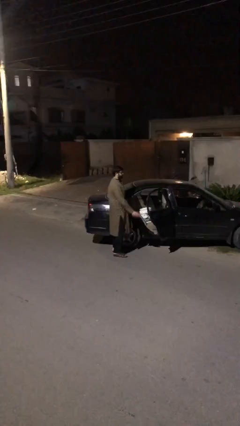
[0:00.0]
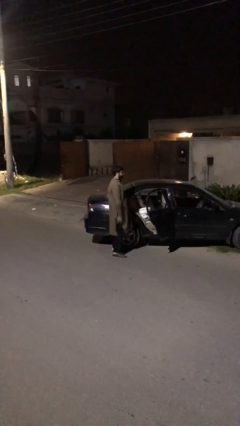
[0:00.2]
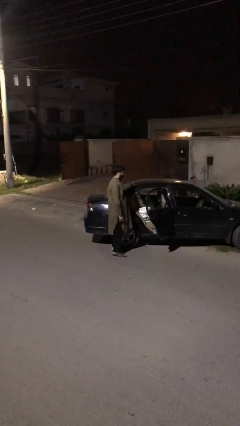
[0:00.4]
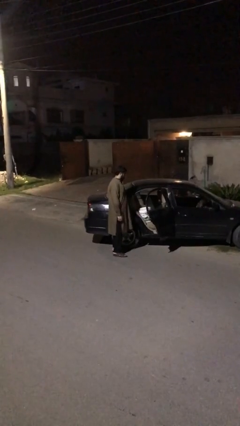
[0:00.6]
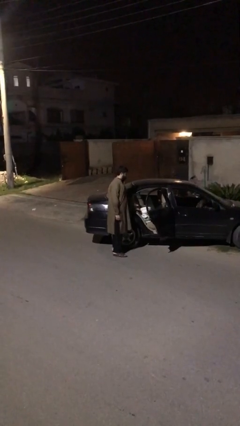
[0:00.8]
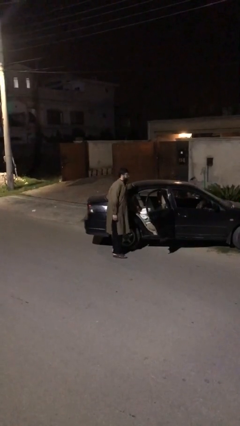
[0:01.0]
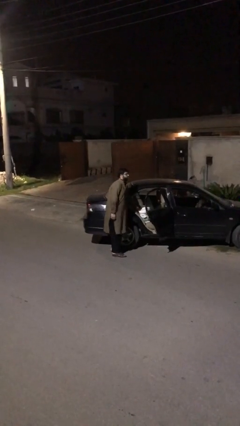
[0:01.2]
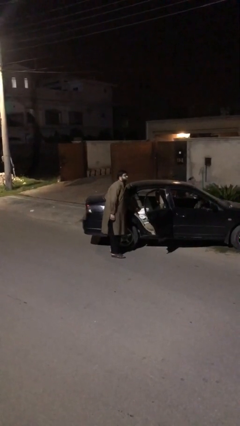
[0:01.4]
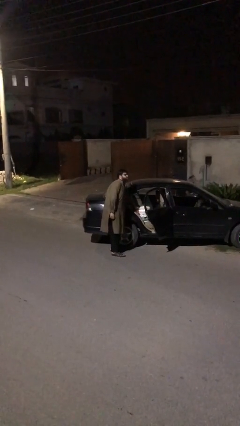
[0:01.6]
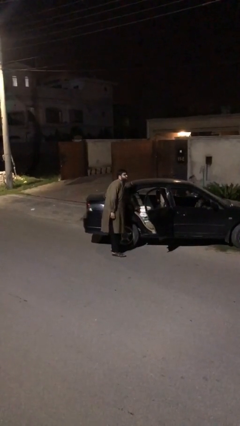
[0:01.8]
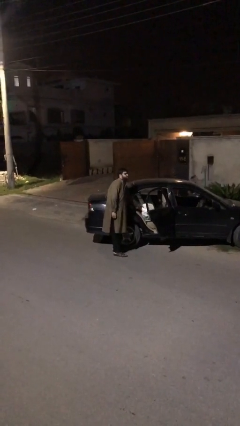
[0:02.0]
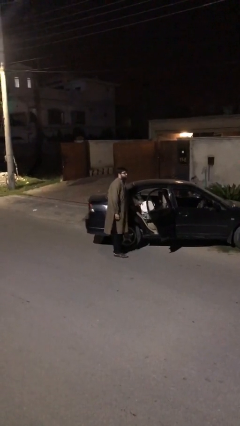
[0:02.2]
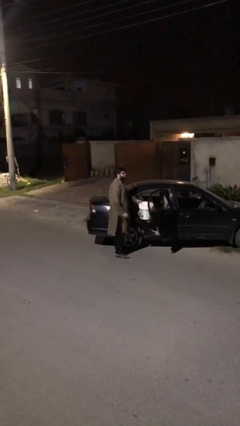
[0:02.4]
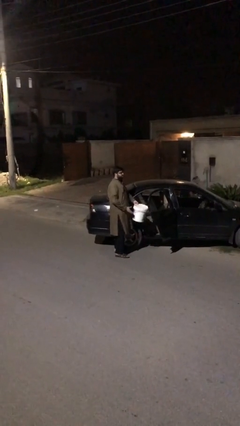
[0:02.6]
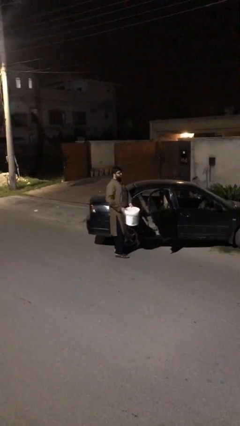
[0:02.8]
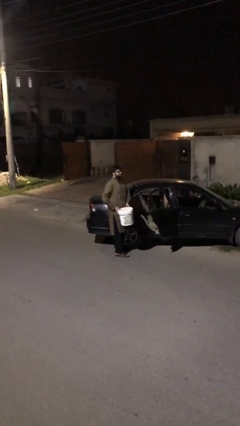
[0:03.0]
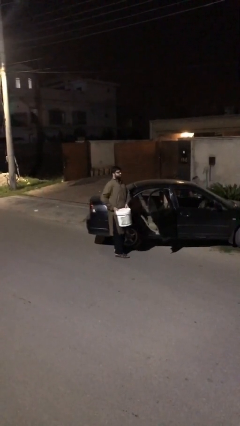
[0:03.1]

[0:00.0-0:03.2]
person unloads car

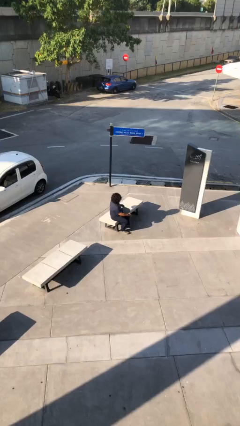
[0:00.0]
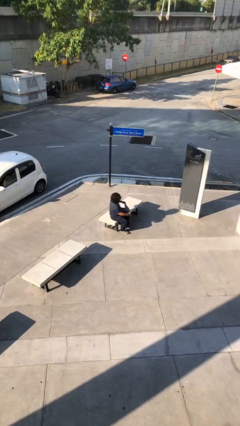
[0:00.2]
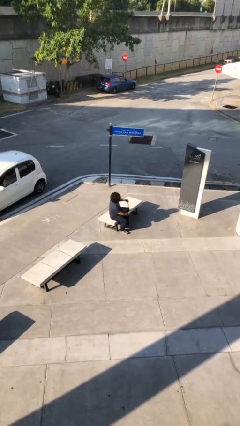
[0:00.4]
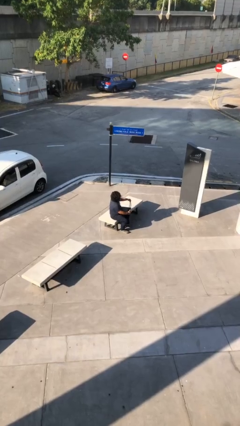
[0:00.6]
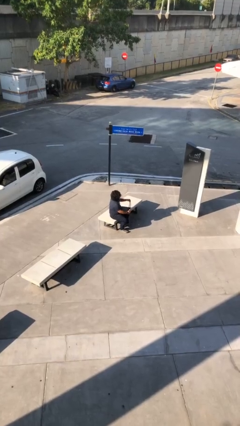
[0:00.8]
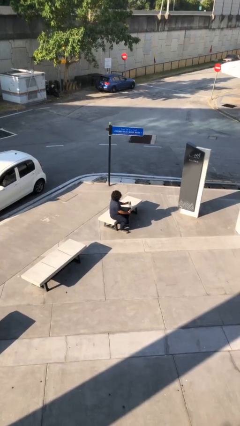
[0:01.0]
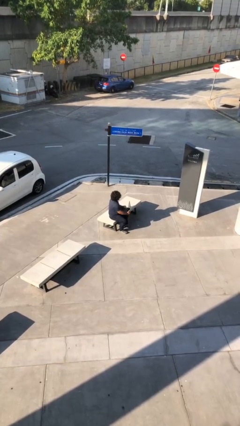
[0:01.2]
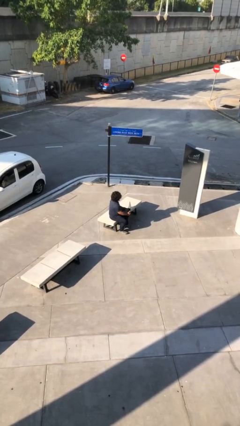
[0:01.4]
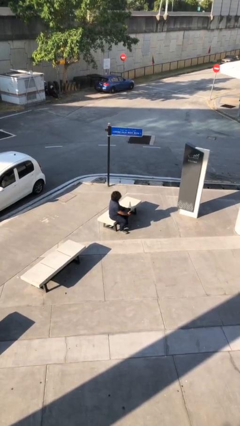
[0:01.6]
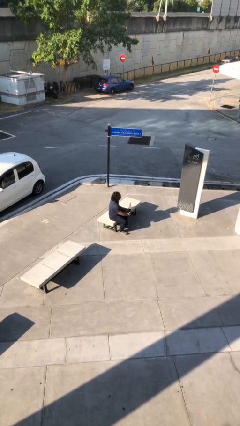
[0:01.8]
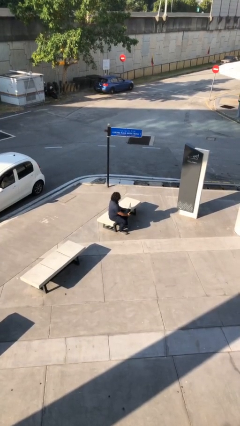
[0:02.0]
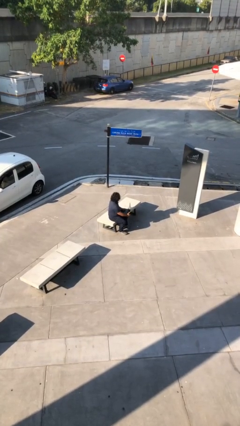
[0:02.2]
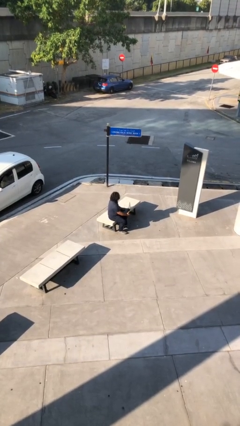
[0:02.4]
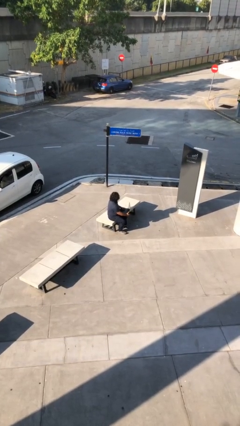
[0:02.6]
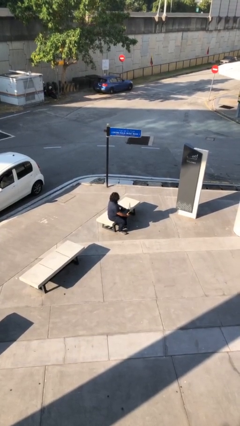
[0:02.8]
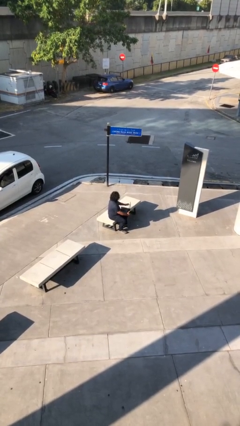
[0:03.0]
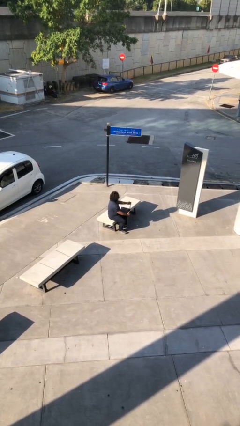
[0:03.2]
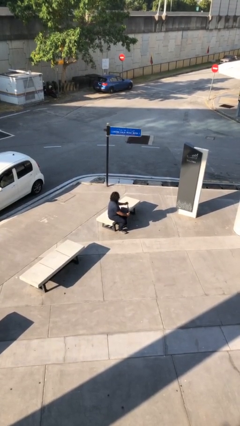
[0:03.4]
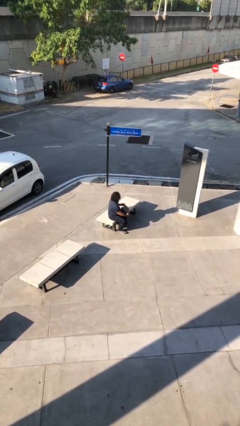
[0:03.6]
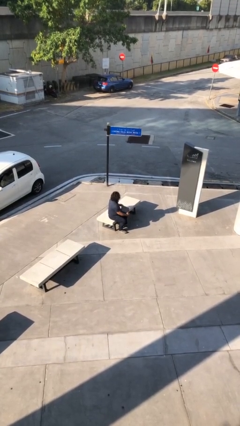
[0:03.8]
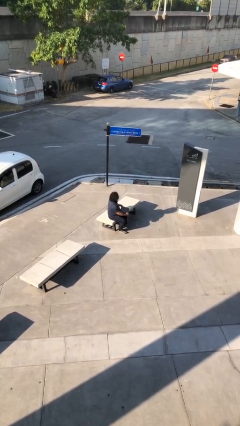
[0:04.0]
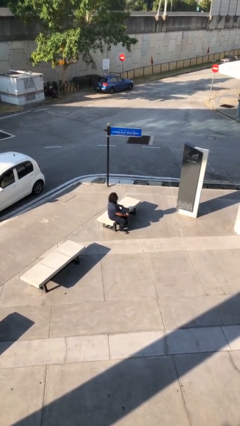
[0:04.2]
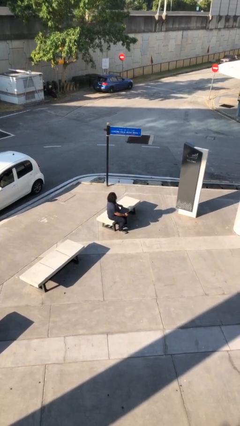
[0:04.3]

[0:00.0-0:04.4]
person interacts with laptop

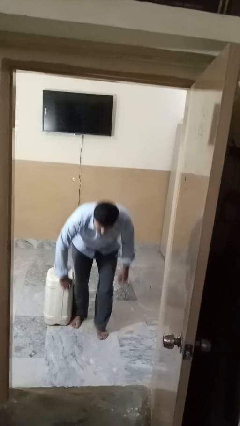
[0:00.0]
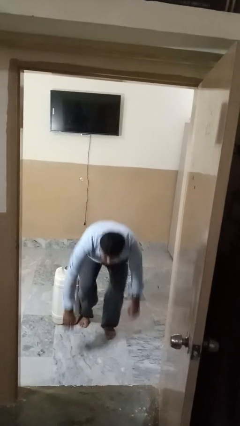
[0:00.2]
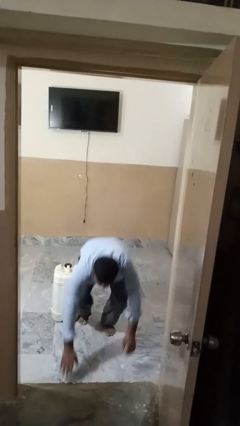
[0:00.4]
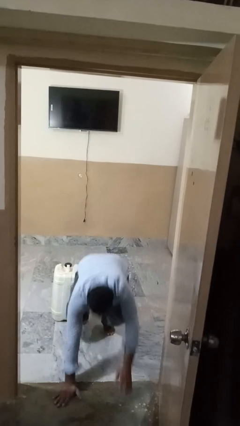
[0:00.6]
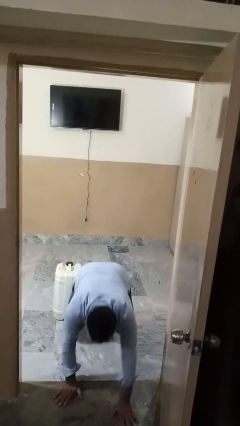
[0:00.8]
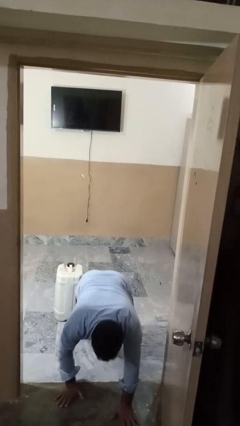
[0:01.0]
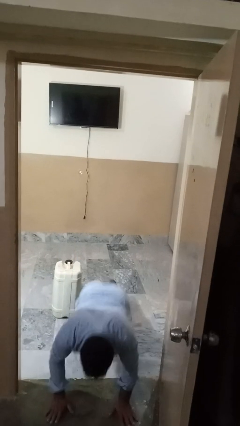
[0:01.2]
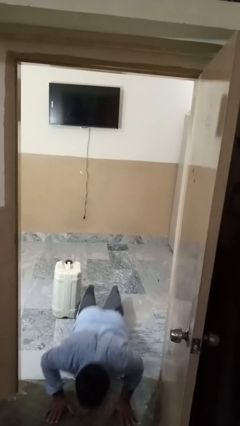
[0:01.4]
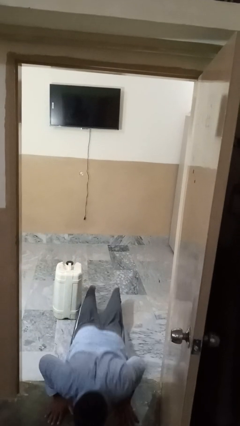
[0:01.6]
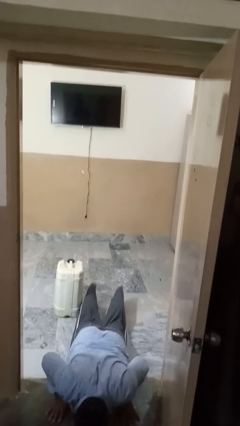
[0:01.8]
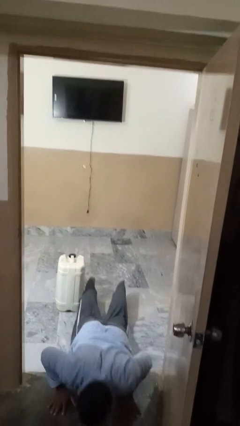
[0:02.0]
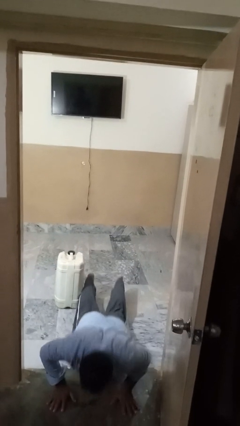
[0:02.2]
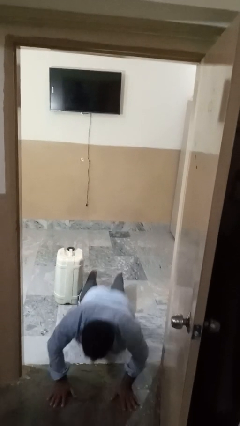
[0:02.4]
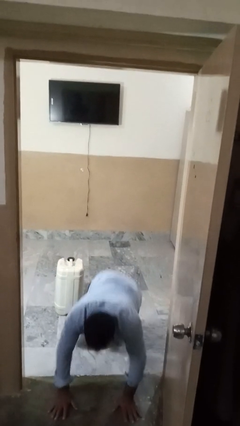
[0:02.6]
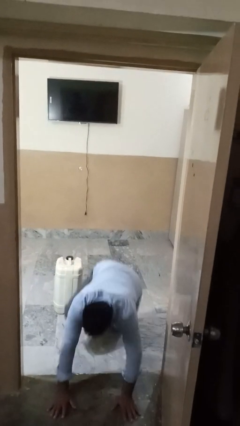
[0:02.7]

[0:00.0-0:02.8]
person lies down on floor

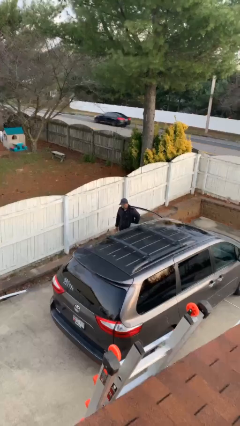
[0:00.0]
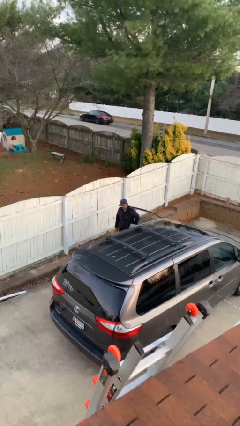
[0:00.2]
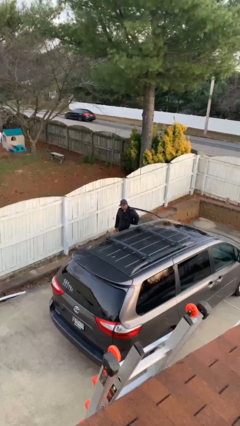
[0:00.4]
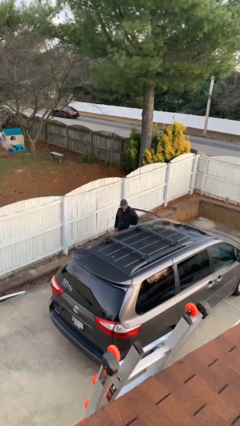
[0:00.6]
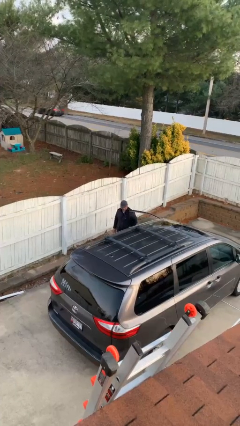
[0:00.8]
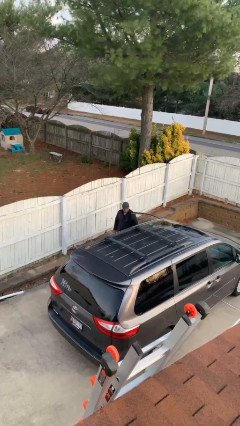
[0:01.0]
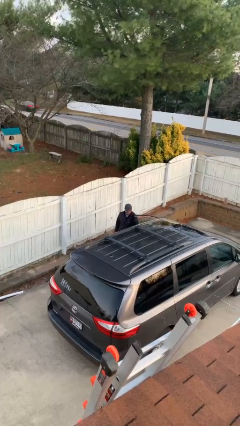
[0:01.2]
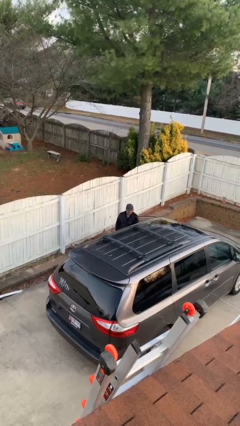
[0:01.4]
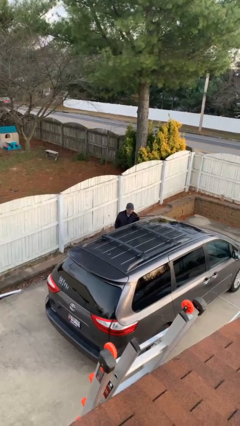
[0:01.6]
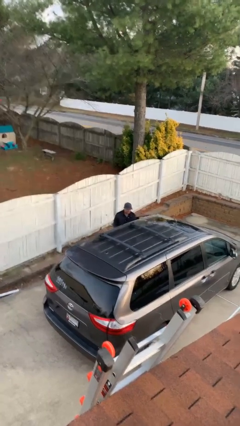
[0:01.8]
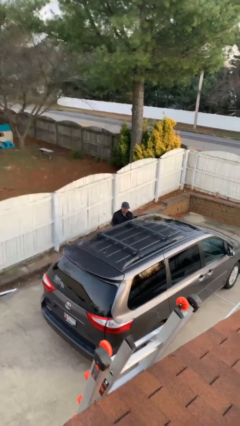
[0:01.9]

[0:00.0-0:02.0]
person closes car door

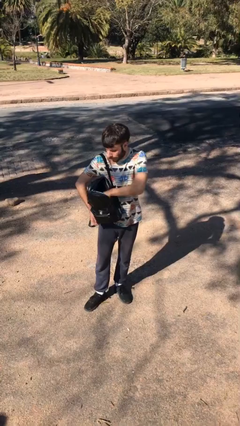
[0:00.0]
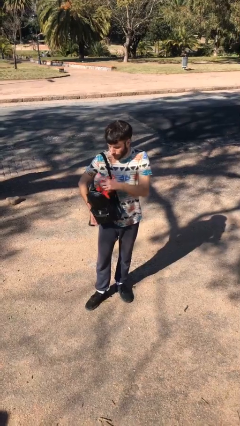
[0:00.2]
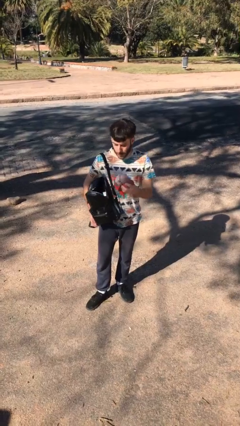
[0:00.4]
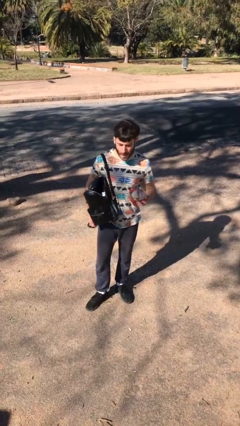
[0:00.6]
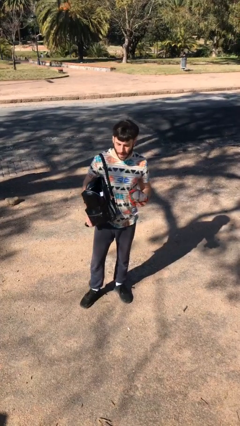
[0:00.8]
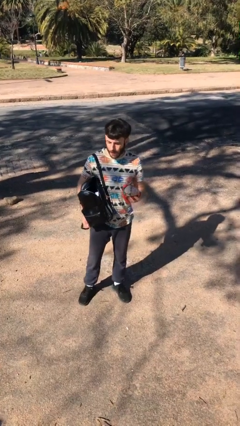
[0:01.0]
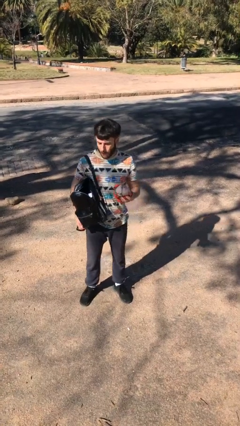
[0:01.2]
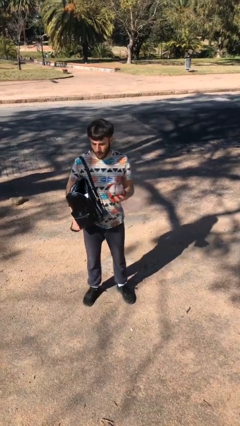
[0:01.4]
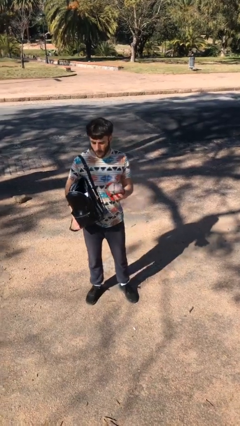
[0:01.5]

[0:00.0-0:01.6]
person takes object from backpack

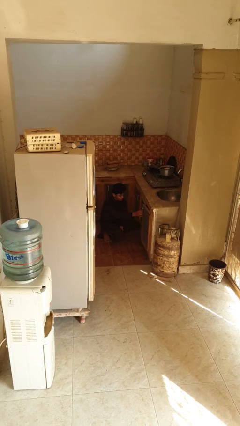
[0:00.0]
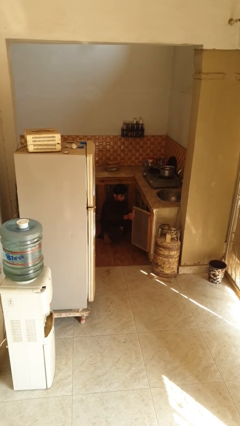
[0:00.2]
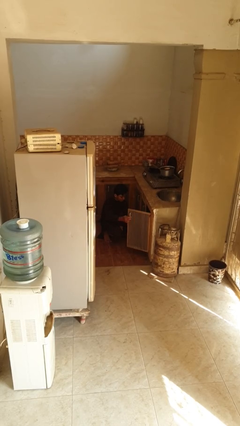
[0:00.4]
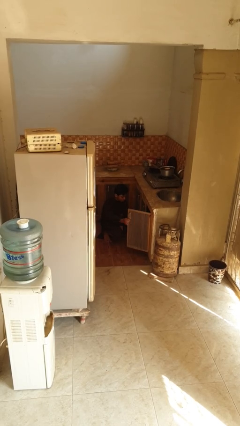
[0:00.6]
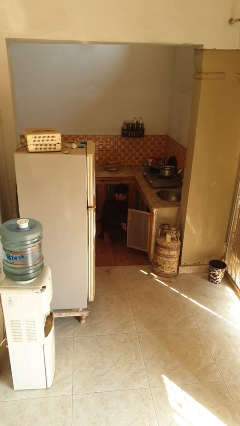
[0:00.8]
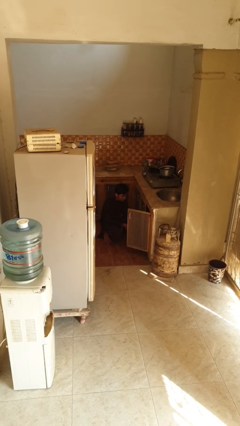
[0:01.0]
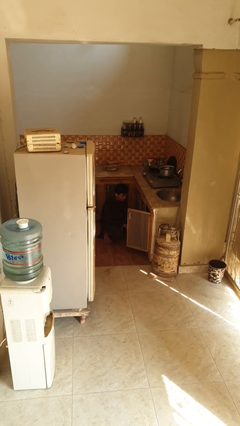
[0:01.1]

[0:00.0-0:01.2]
person opens kitchen drawer

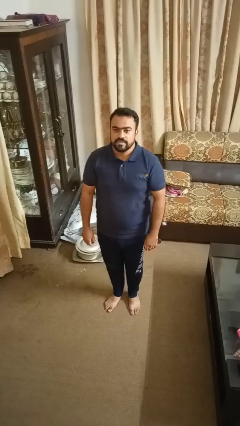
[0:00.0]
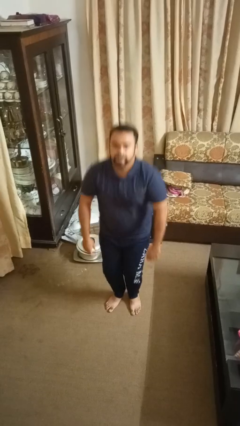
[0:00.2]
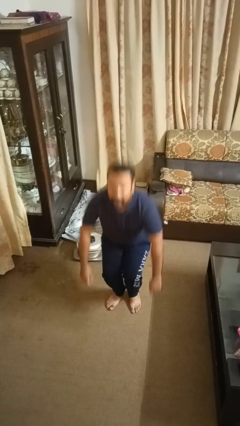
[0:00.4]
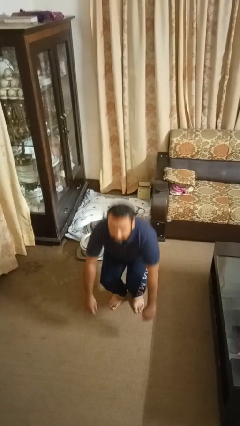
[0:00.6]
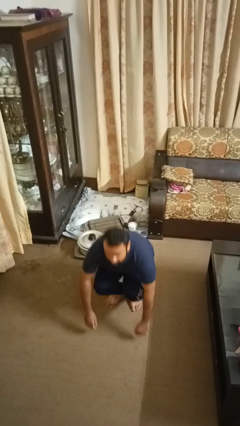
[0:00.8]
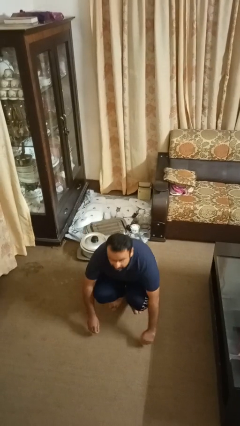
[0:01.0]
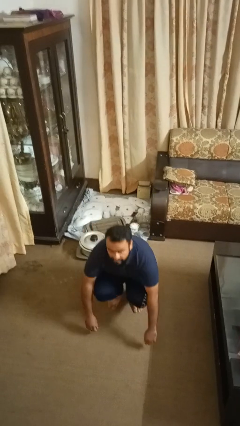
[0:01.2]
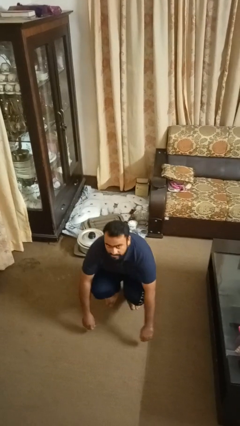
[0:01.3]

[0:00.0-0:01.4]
person squats

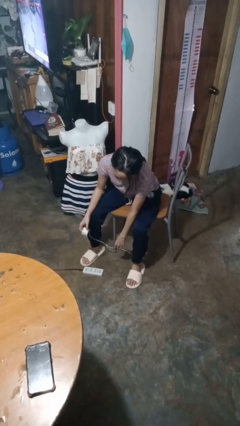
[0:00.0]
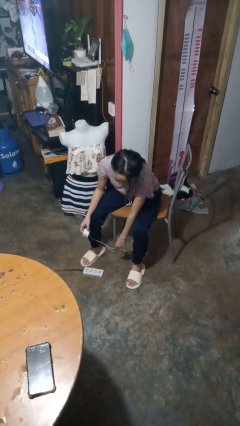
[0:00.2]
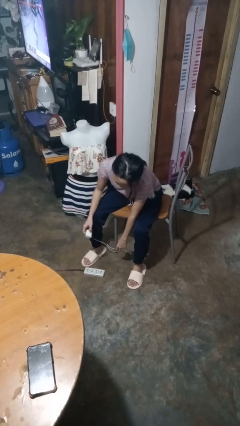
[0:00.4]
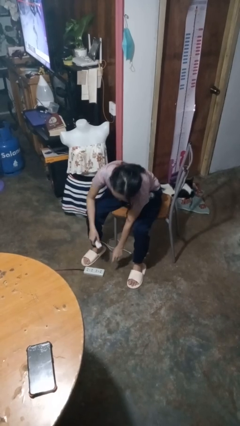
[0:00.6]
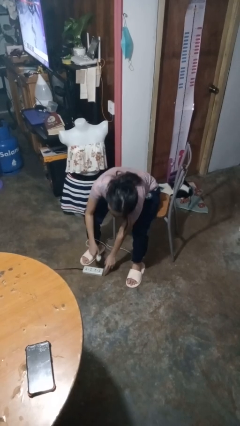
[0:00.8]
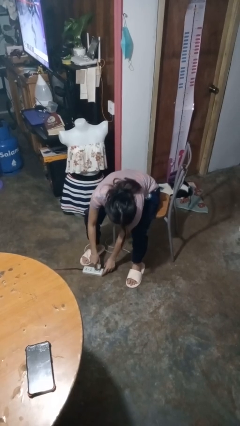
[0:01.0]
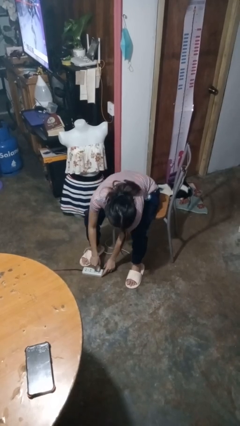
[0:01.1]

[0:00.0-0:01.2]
person plugs into electrical socket
